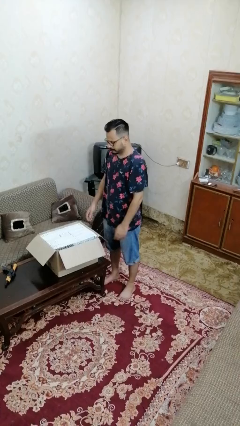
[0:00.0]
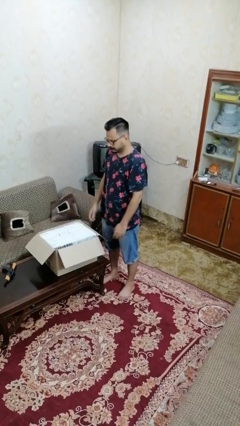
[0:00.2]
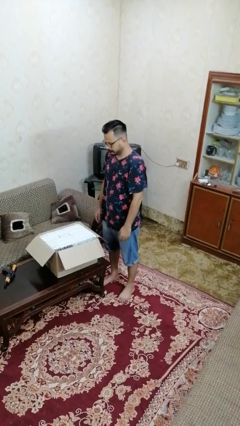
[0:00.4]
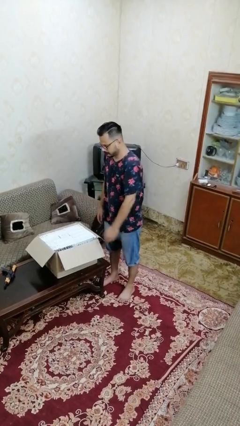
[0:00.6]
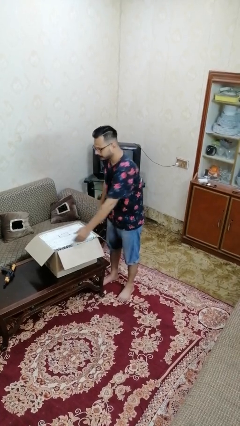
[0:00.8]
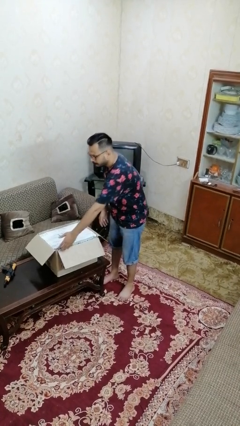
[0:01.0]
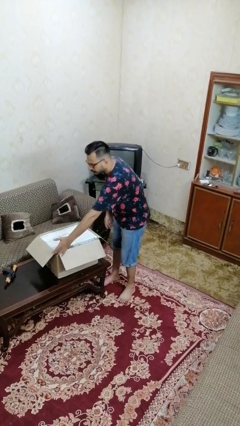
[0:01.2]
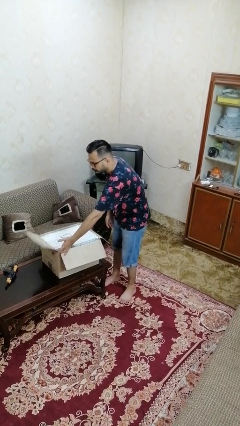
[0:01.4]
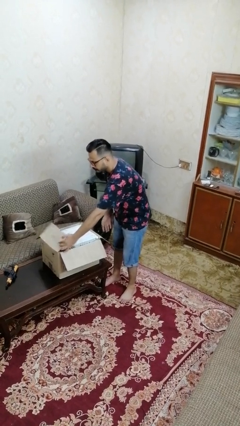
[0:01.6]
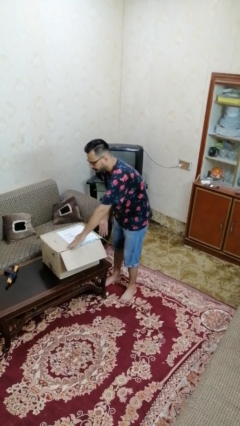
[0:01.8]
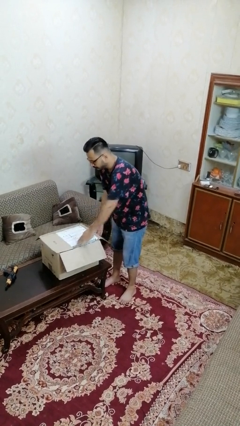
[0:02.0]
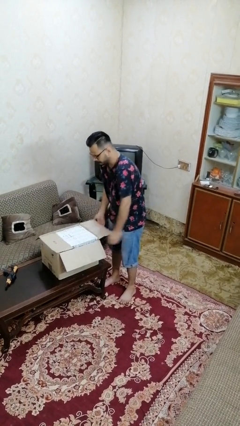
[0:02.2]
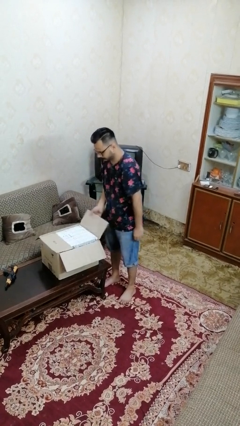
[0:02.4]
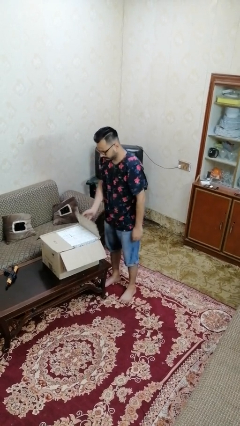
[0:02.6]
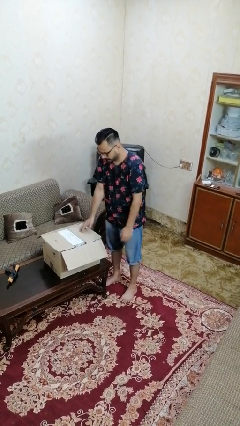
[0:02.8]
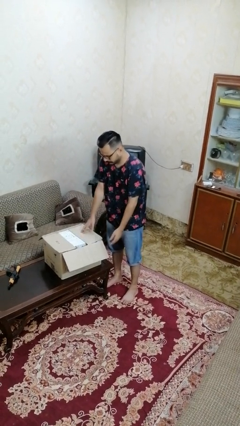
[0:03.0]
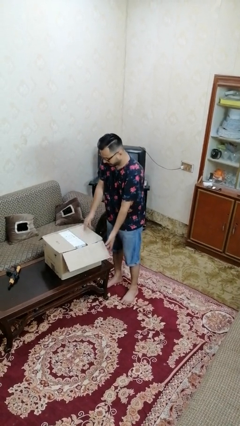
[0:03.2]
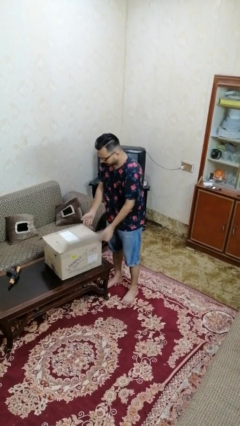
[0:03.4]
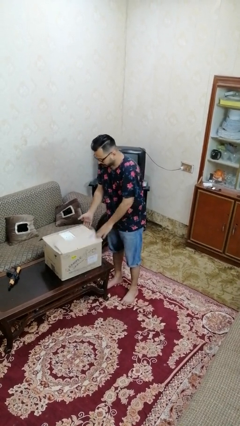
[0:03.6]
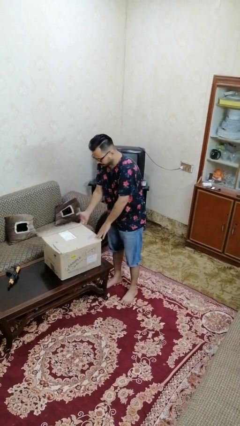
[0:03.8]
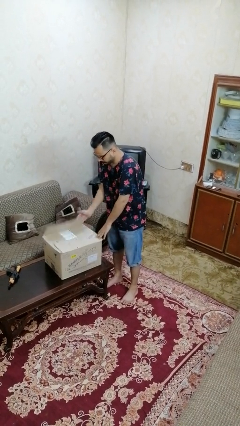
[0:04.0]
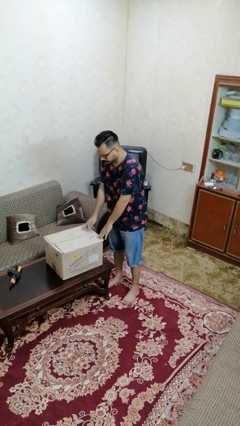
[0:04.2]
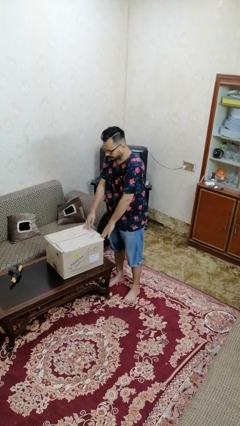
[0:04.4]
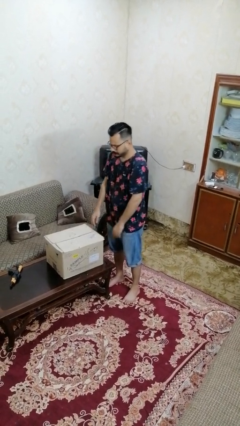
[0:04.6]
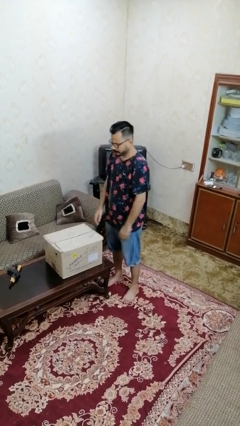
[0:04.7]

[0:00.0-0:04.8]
person closes box

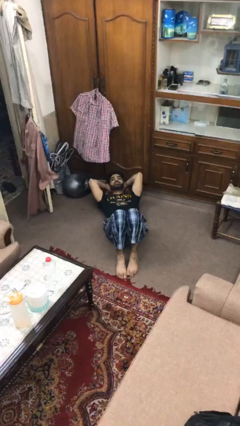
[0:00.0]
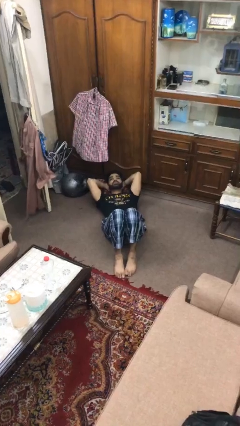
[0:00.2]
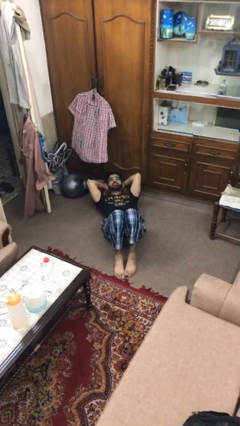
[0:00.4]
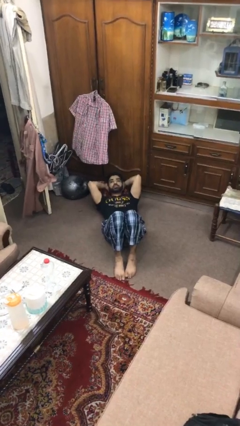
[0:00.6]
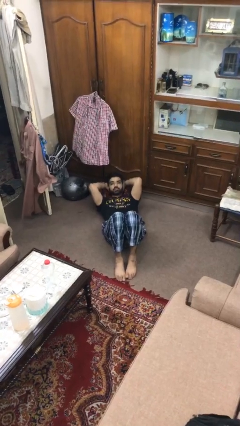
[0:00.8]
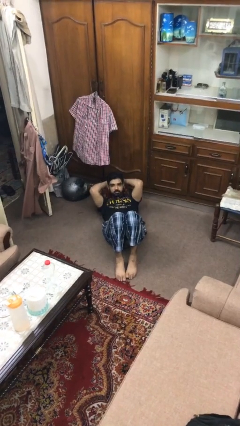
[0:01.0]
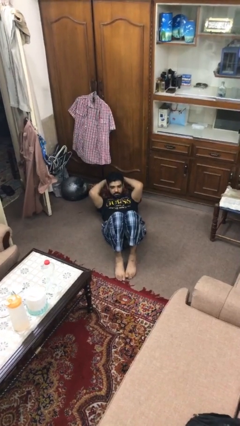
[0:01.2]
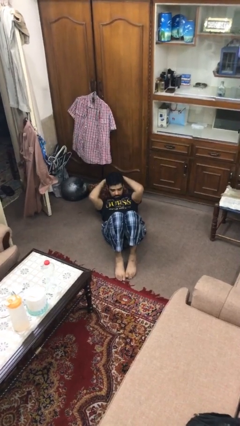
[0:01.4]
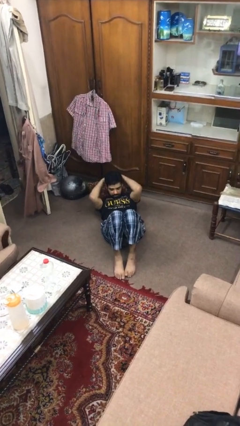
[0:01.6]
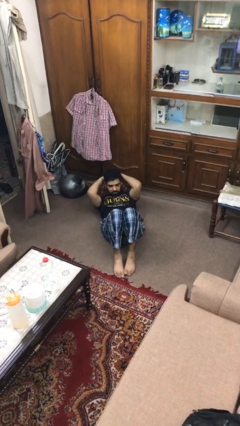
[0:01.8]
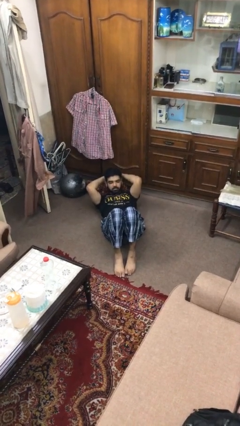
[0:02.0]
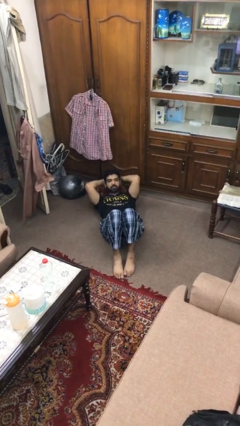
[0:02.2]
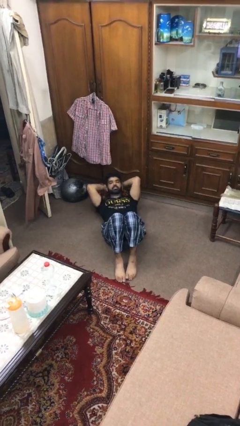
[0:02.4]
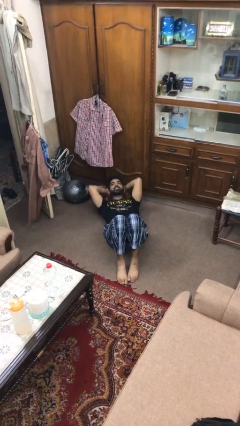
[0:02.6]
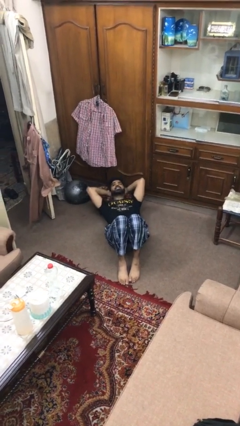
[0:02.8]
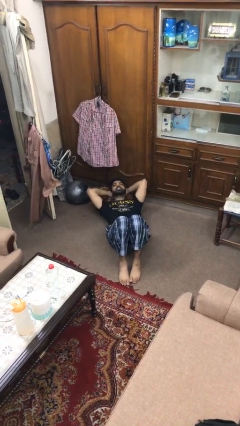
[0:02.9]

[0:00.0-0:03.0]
person exercises with situp

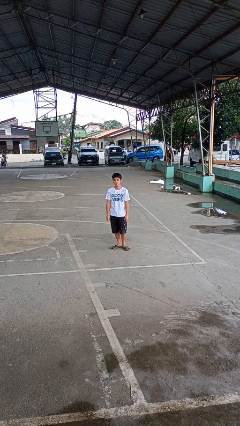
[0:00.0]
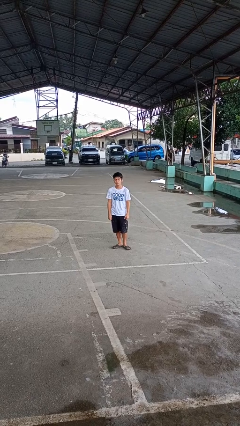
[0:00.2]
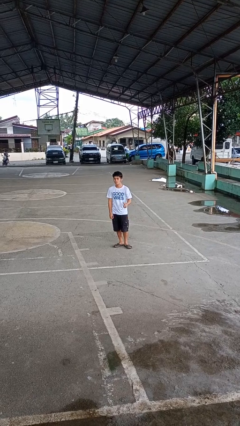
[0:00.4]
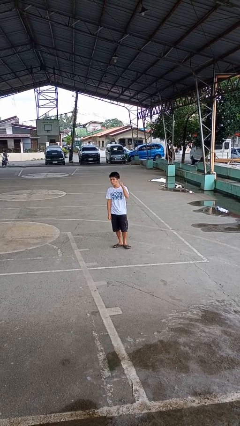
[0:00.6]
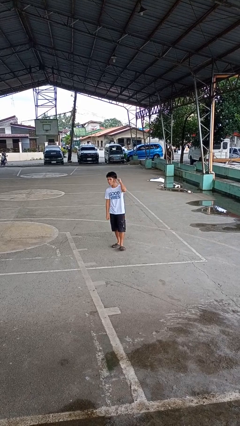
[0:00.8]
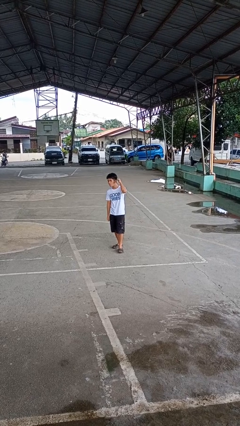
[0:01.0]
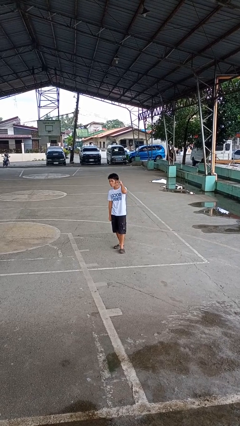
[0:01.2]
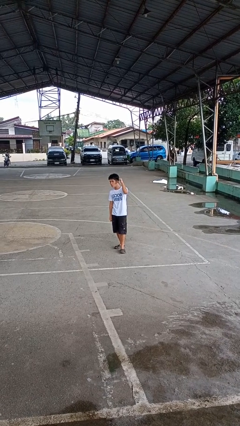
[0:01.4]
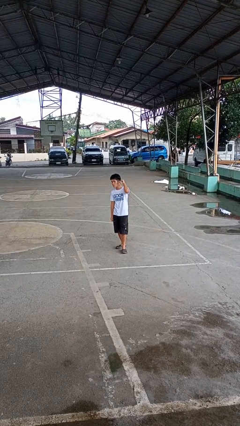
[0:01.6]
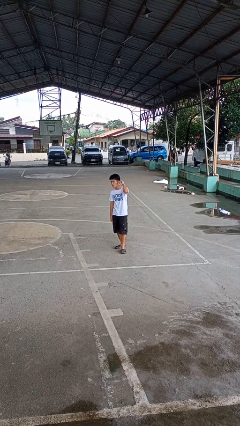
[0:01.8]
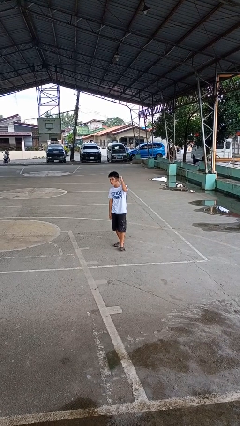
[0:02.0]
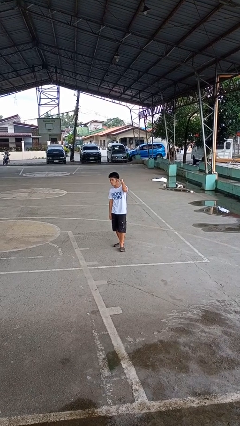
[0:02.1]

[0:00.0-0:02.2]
person gestures behind me

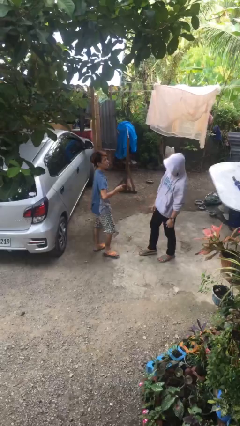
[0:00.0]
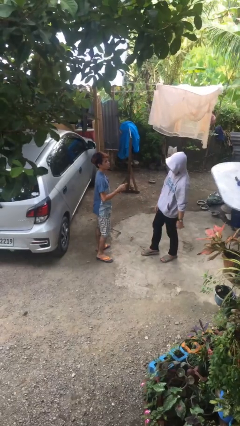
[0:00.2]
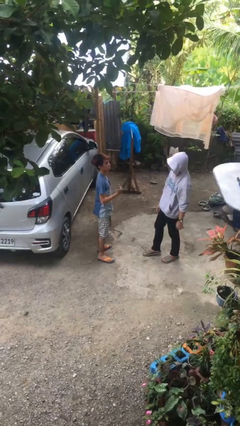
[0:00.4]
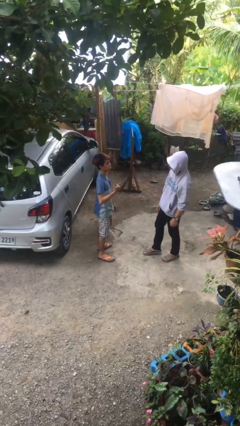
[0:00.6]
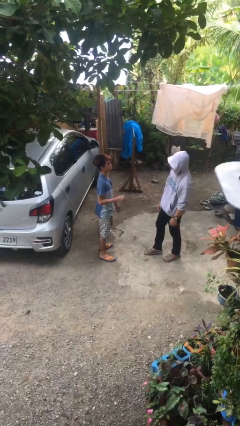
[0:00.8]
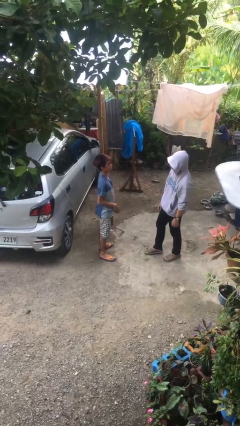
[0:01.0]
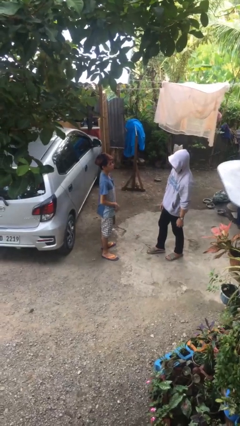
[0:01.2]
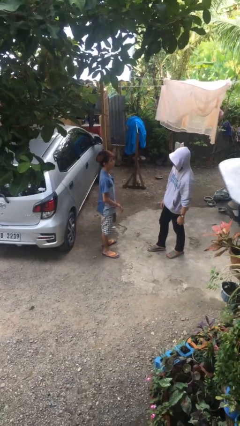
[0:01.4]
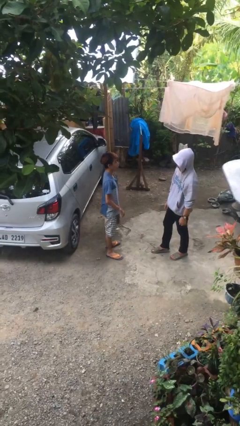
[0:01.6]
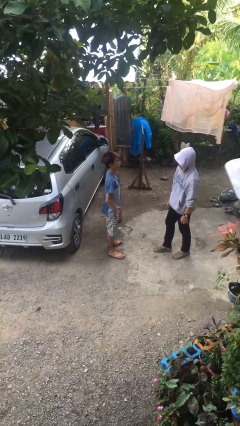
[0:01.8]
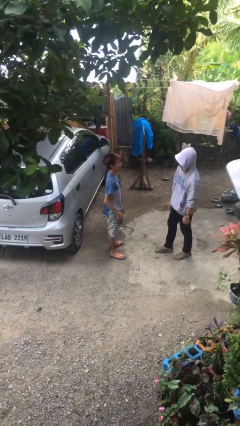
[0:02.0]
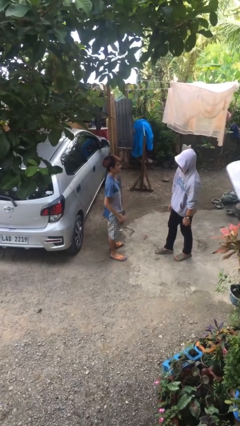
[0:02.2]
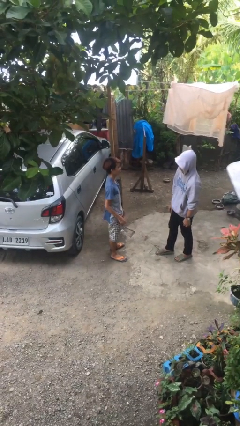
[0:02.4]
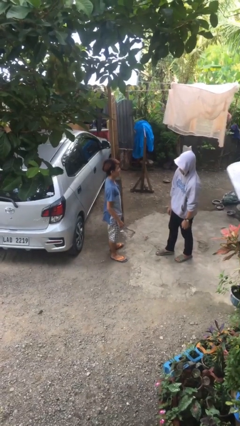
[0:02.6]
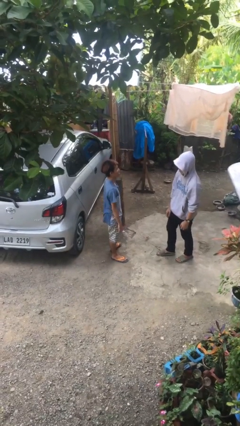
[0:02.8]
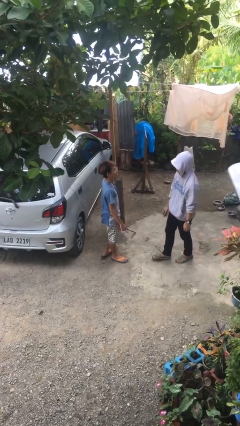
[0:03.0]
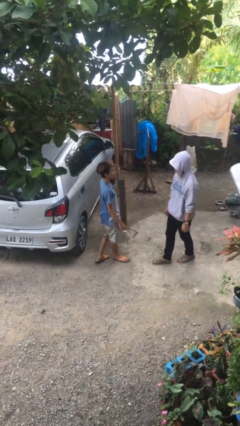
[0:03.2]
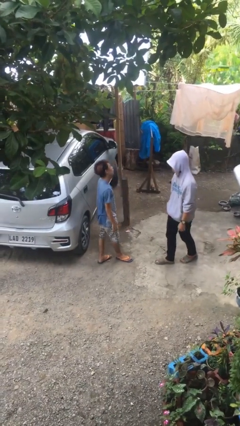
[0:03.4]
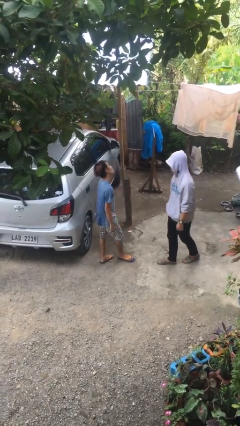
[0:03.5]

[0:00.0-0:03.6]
person talks to person

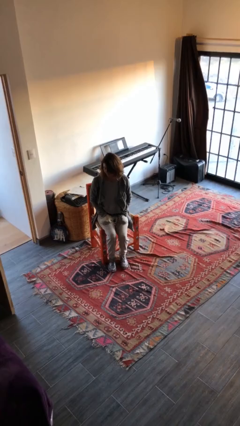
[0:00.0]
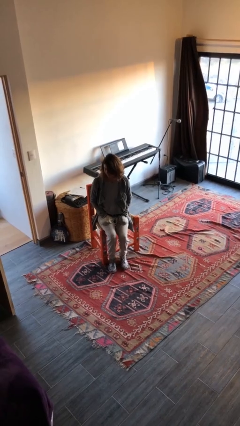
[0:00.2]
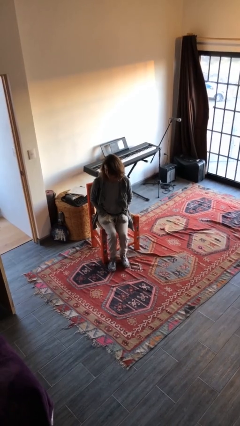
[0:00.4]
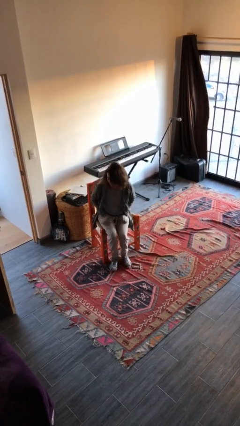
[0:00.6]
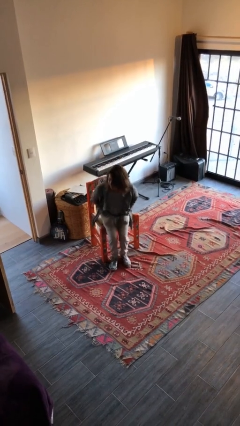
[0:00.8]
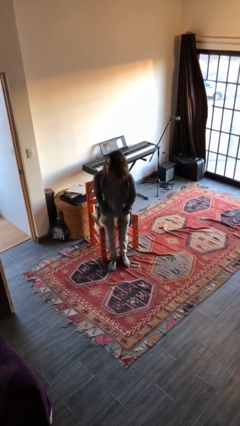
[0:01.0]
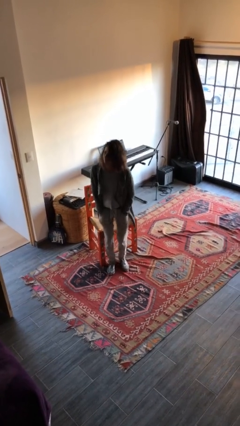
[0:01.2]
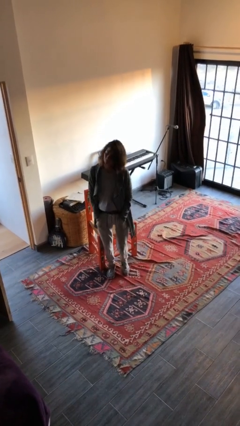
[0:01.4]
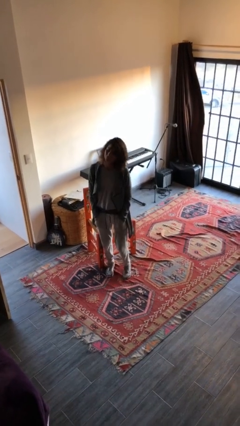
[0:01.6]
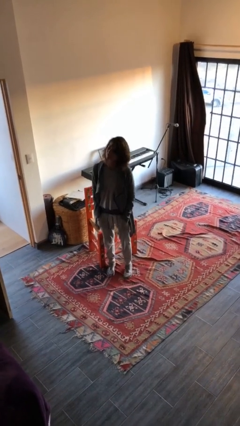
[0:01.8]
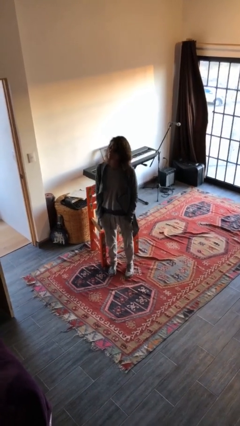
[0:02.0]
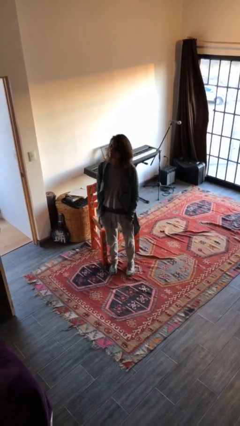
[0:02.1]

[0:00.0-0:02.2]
person stands up

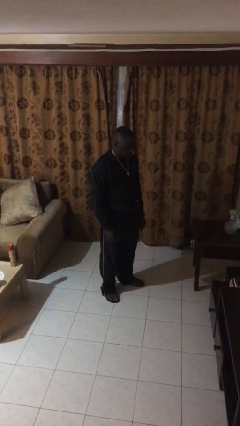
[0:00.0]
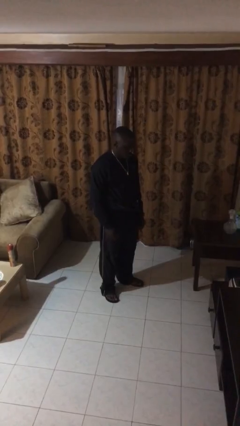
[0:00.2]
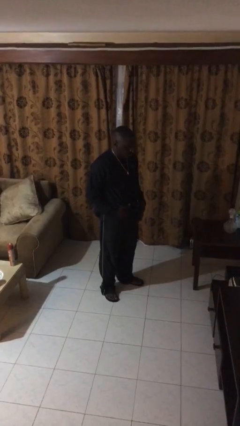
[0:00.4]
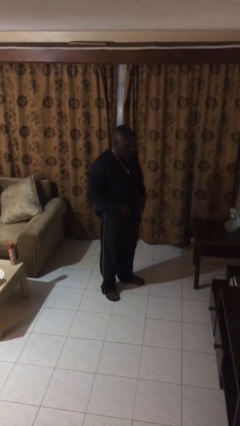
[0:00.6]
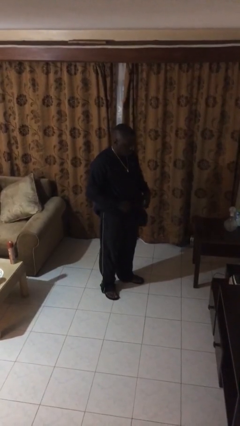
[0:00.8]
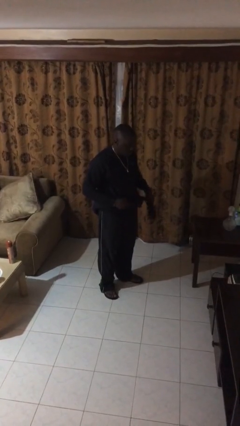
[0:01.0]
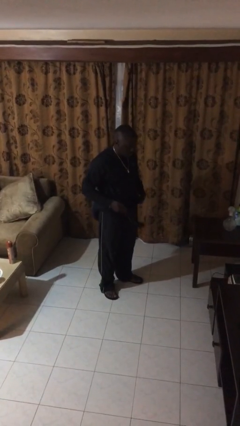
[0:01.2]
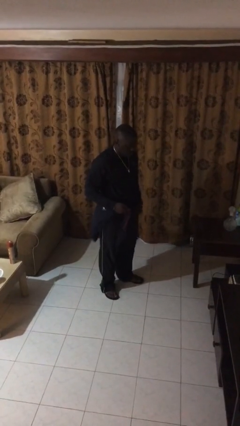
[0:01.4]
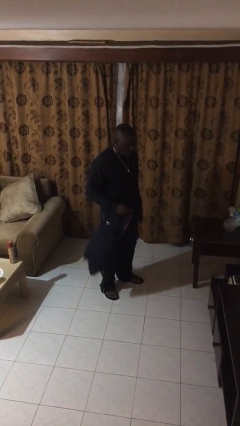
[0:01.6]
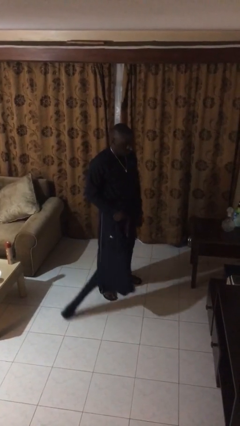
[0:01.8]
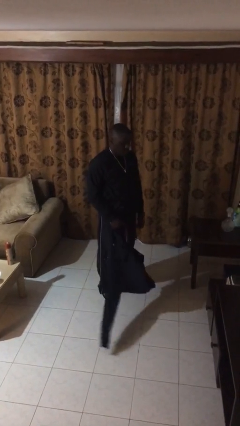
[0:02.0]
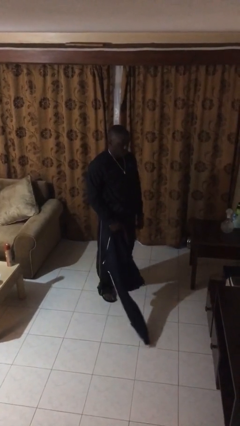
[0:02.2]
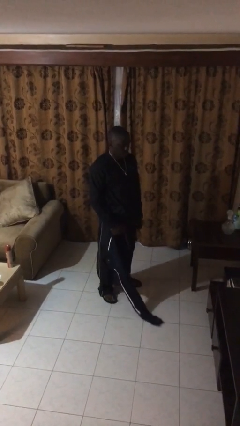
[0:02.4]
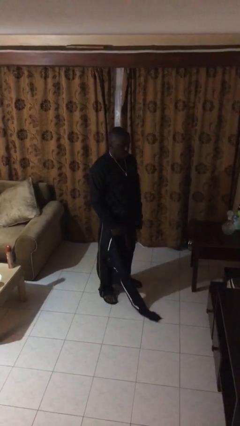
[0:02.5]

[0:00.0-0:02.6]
person unties jacket around waist
